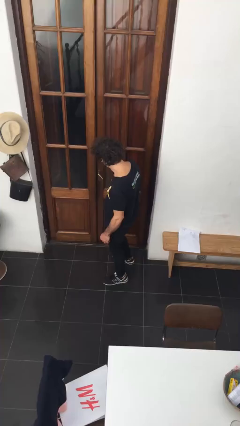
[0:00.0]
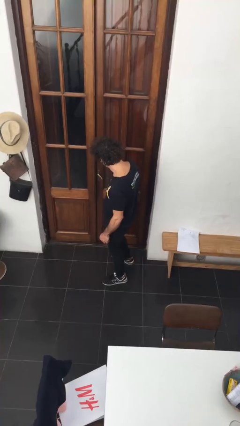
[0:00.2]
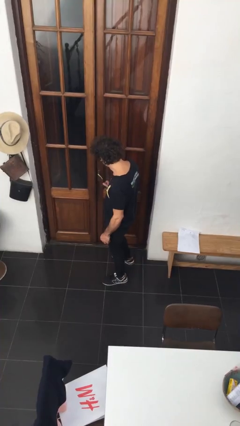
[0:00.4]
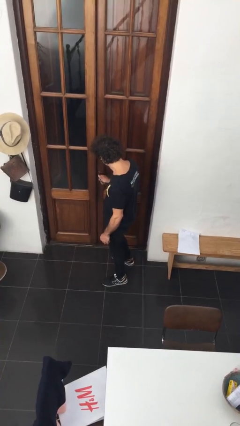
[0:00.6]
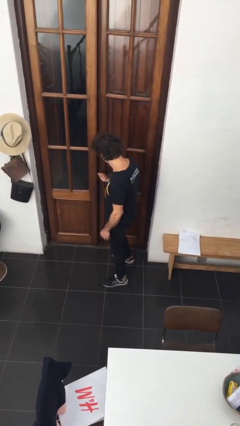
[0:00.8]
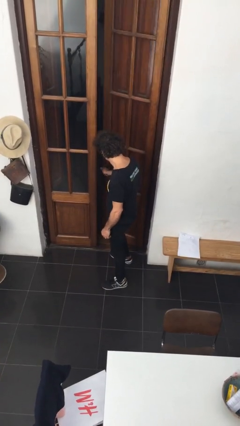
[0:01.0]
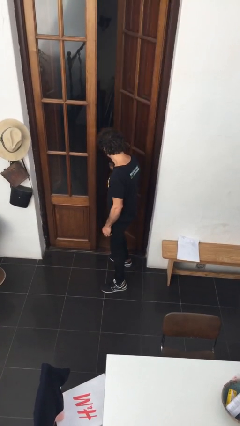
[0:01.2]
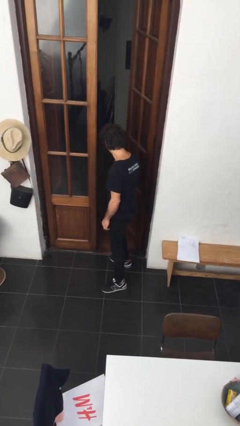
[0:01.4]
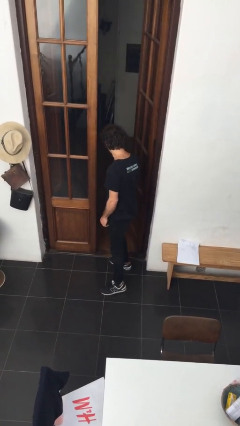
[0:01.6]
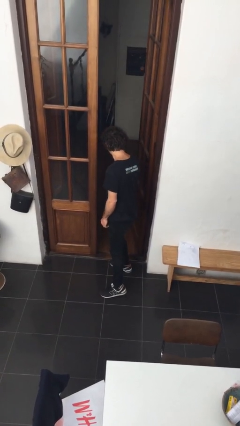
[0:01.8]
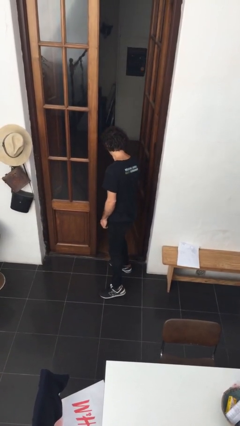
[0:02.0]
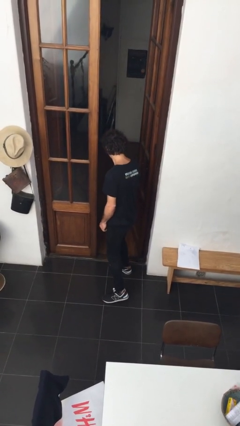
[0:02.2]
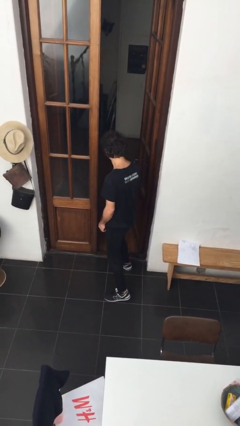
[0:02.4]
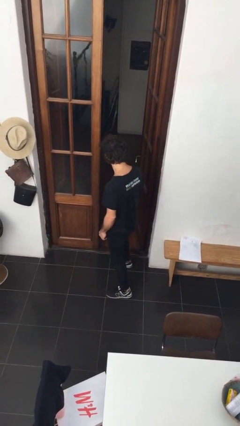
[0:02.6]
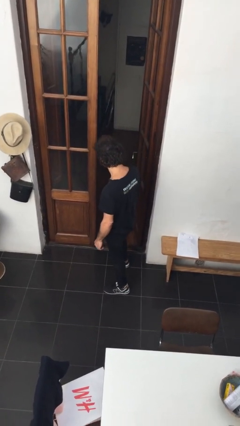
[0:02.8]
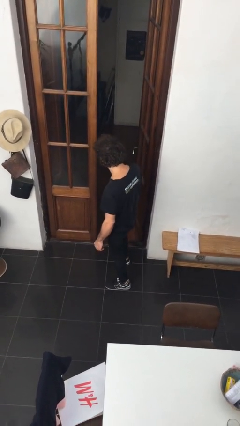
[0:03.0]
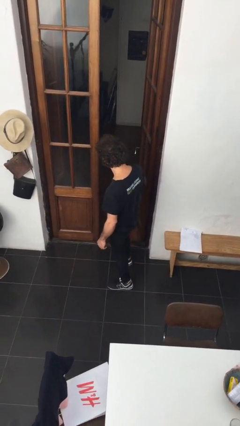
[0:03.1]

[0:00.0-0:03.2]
person opens facility door

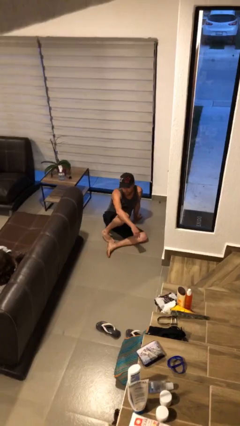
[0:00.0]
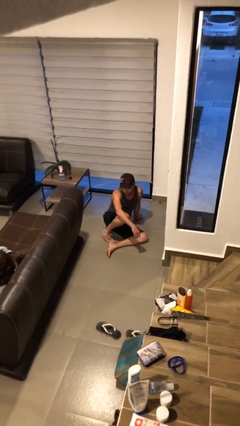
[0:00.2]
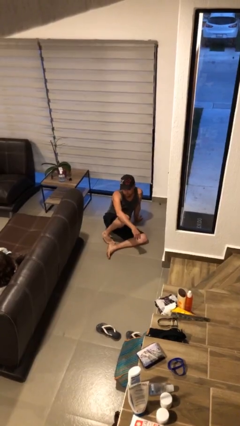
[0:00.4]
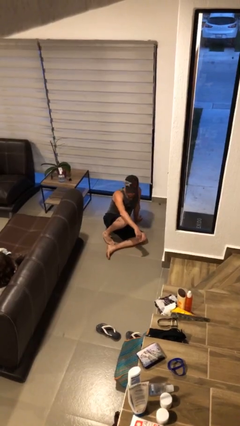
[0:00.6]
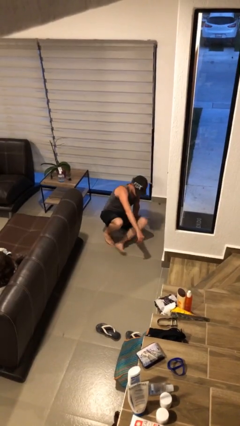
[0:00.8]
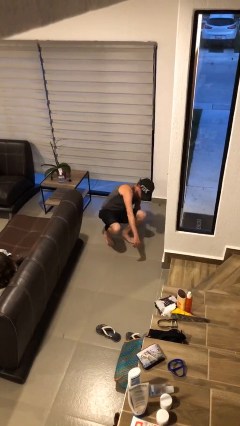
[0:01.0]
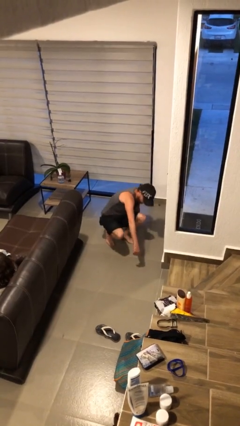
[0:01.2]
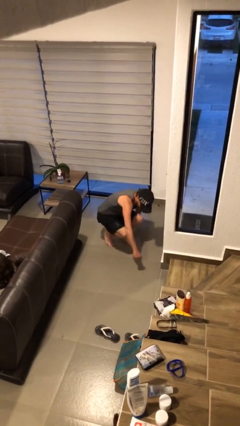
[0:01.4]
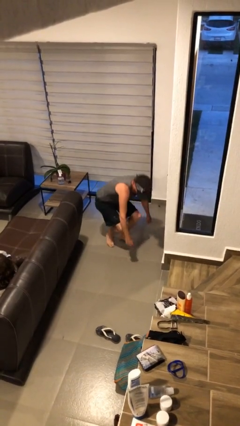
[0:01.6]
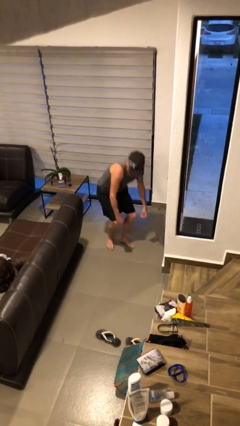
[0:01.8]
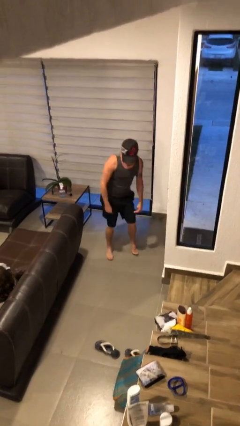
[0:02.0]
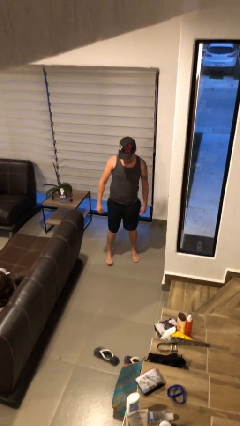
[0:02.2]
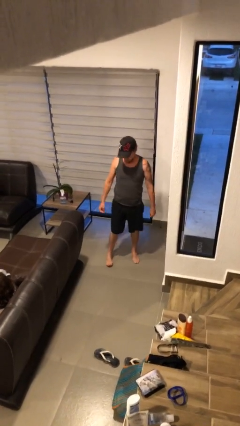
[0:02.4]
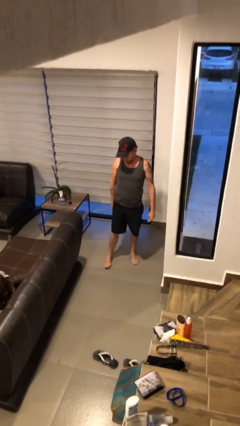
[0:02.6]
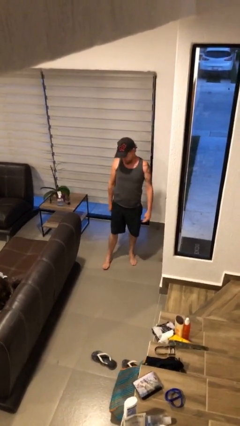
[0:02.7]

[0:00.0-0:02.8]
person stands up

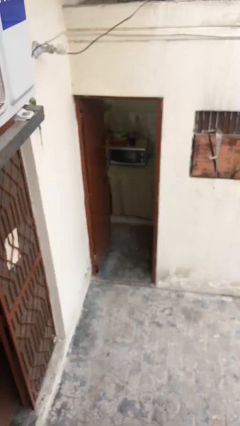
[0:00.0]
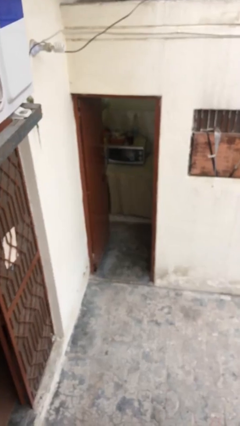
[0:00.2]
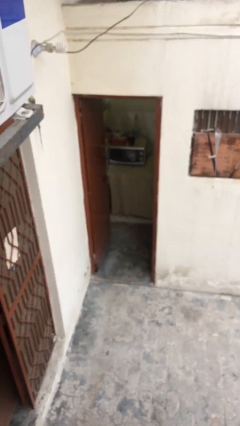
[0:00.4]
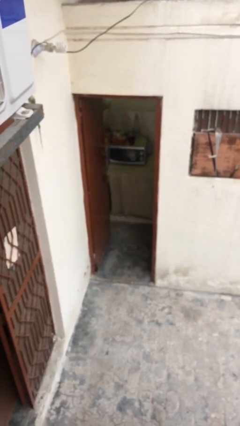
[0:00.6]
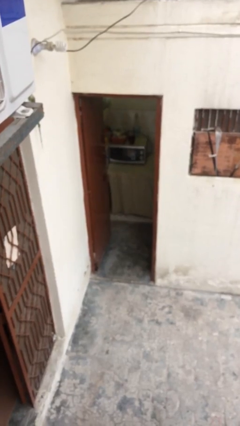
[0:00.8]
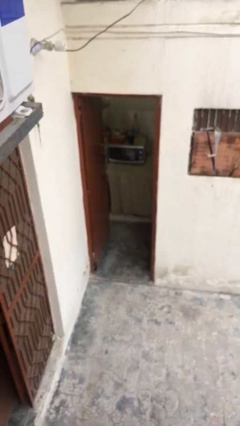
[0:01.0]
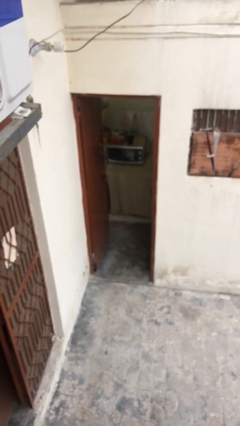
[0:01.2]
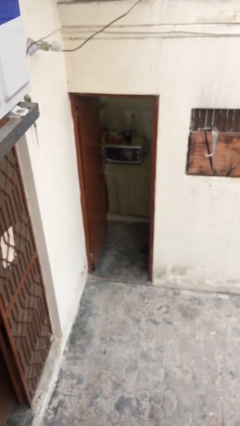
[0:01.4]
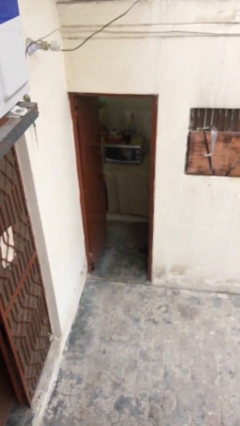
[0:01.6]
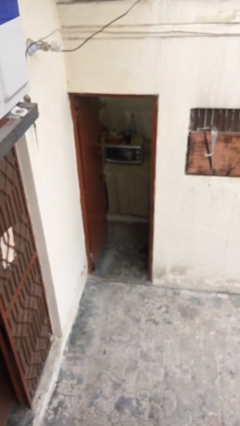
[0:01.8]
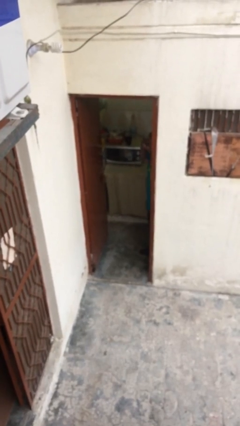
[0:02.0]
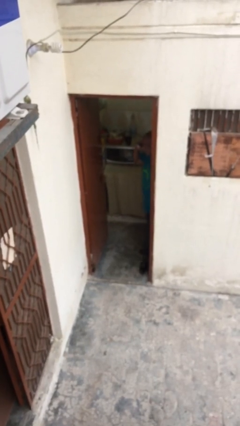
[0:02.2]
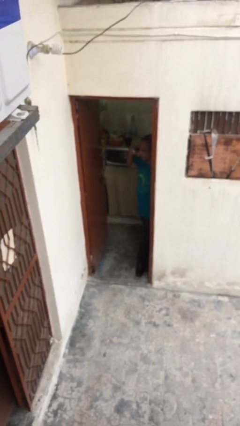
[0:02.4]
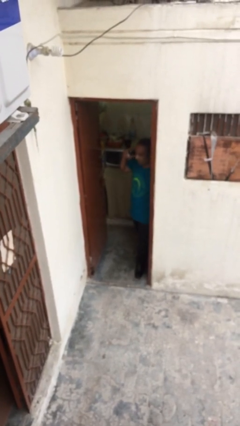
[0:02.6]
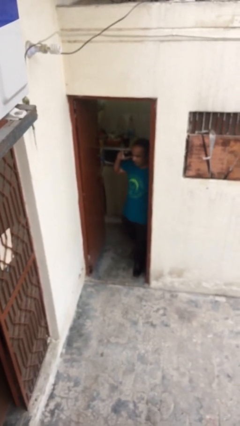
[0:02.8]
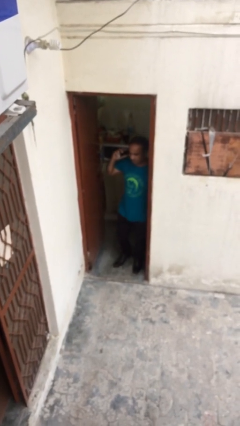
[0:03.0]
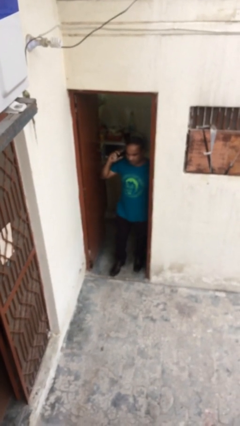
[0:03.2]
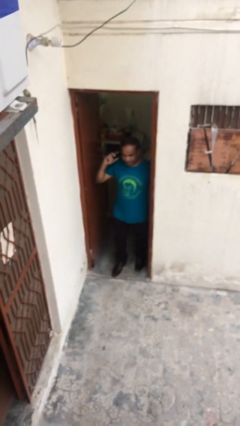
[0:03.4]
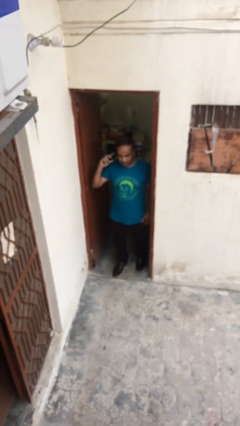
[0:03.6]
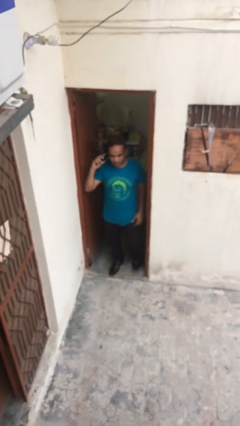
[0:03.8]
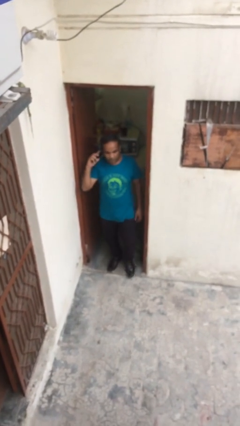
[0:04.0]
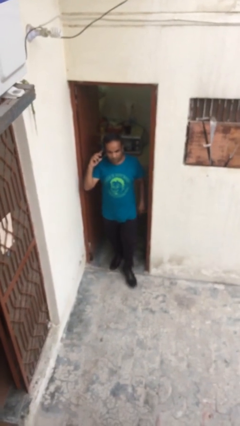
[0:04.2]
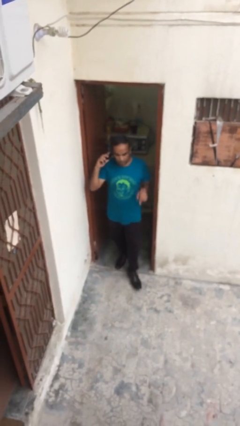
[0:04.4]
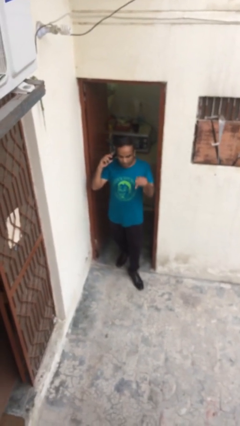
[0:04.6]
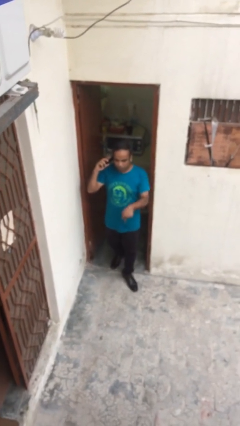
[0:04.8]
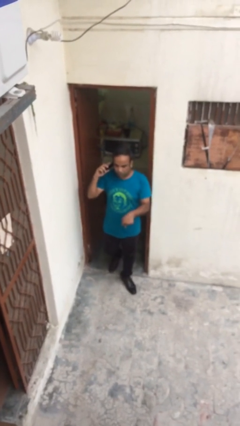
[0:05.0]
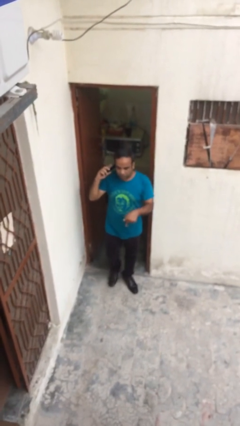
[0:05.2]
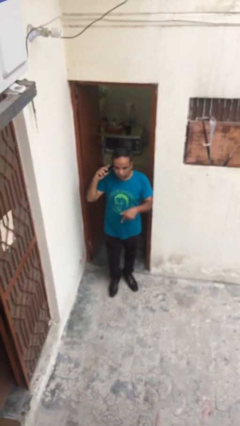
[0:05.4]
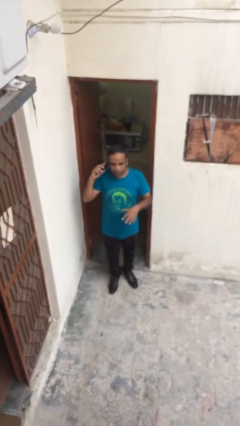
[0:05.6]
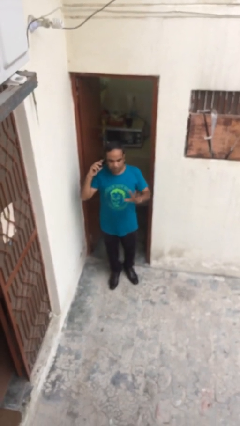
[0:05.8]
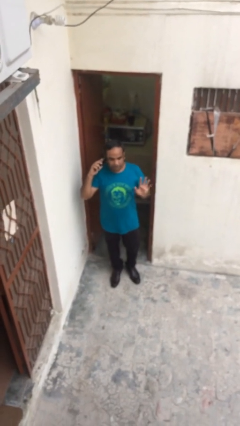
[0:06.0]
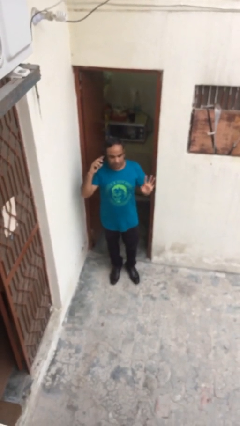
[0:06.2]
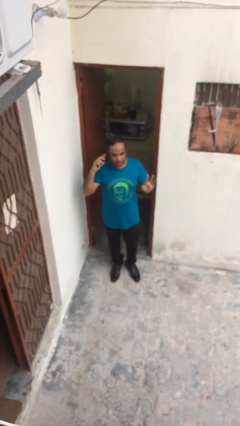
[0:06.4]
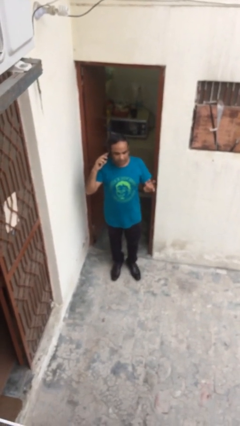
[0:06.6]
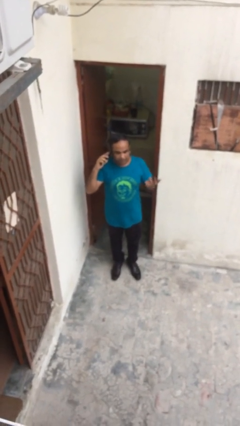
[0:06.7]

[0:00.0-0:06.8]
person enters scene through structure

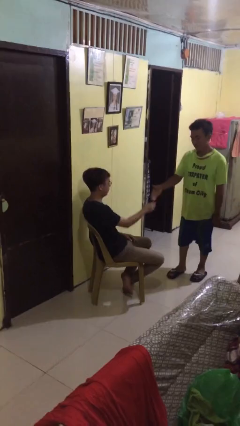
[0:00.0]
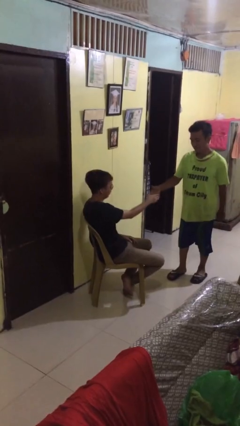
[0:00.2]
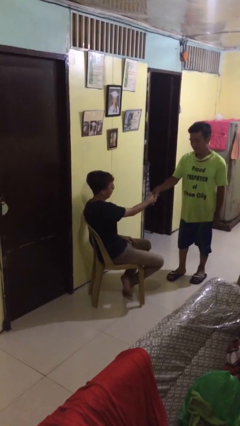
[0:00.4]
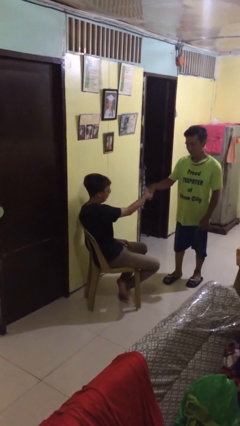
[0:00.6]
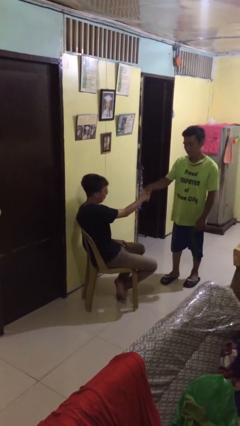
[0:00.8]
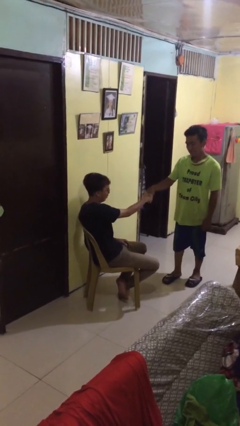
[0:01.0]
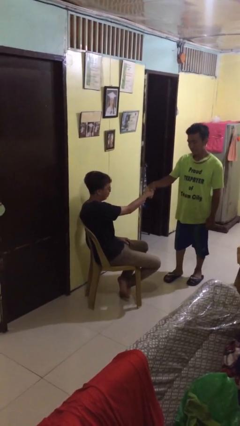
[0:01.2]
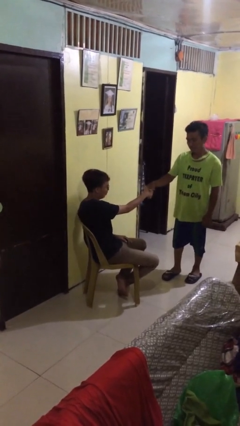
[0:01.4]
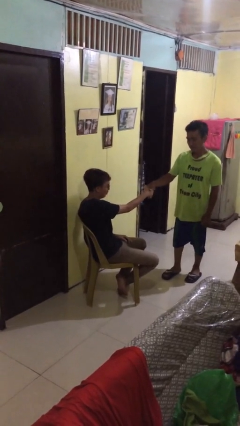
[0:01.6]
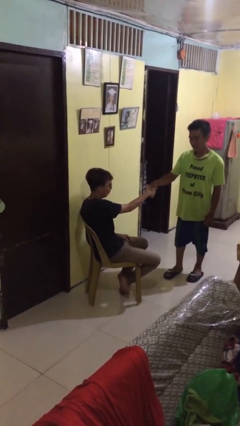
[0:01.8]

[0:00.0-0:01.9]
person shakes hand

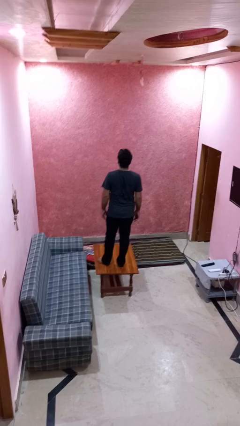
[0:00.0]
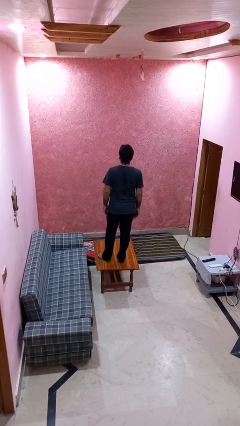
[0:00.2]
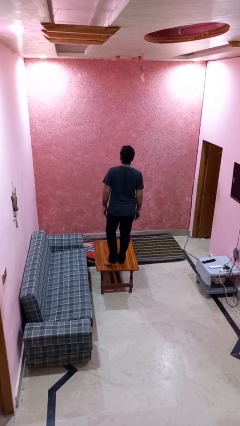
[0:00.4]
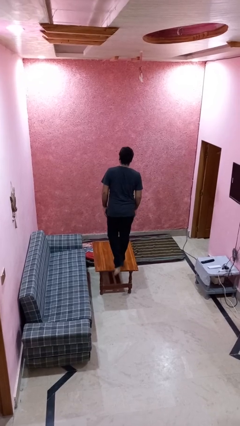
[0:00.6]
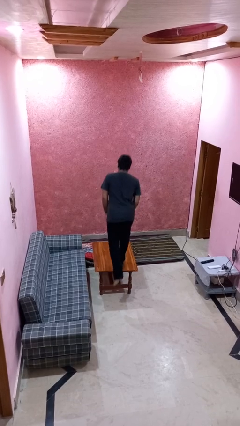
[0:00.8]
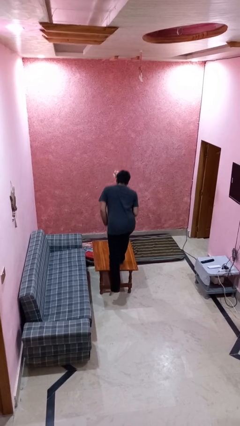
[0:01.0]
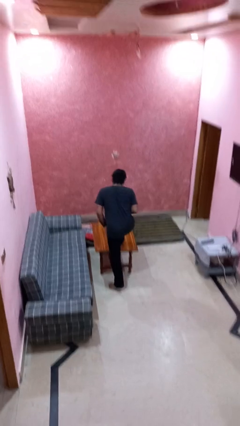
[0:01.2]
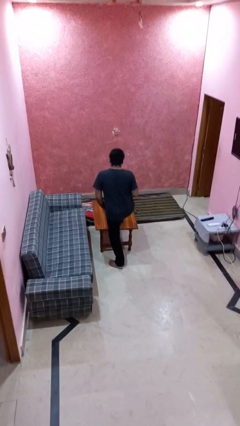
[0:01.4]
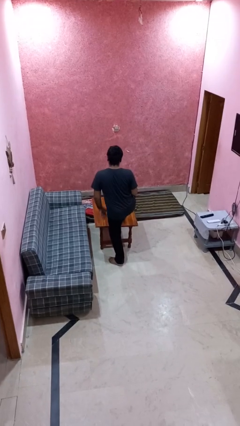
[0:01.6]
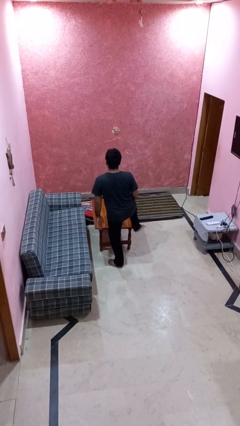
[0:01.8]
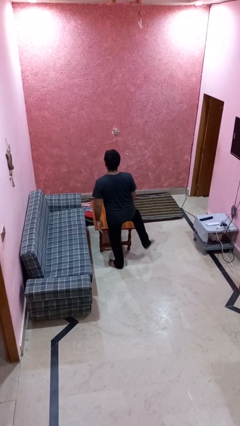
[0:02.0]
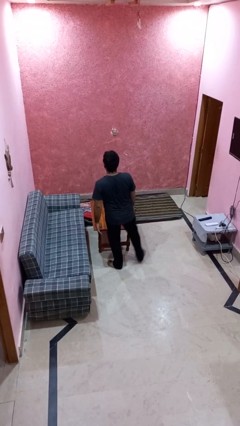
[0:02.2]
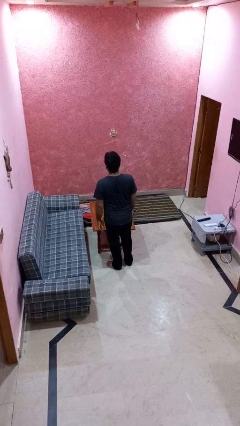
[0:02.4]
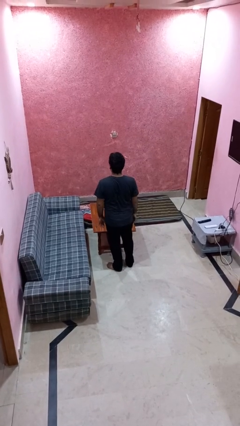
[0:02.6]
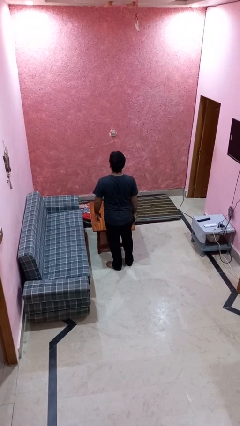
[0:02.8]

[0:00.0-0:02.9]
person climbs off table
